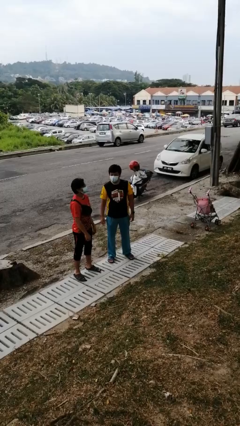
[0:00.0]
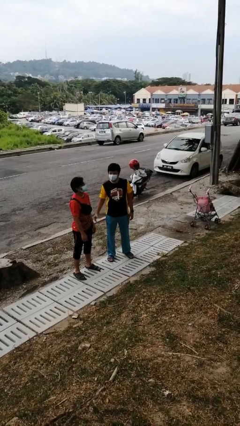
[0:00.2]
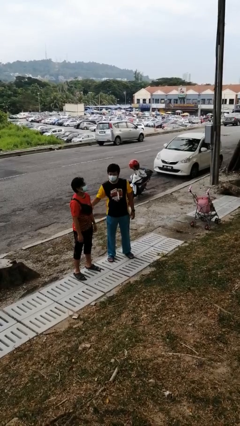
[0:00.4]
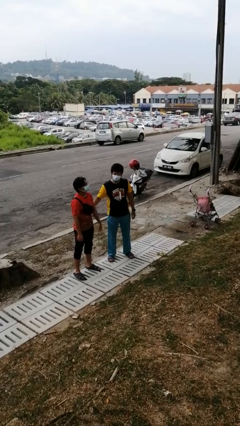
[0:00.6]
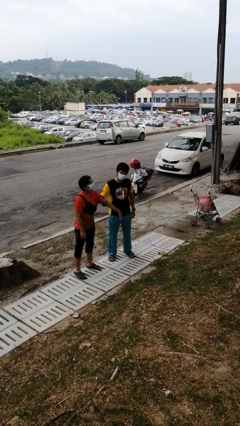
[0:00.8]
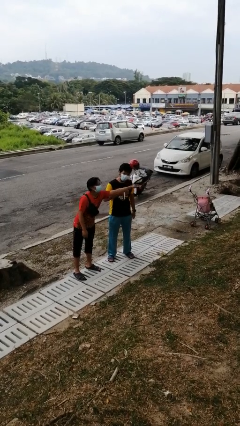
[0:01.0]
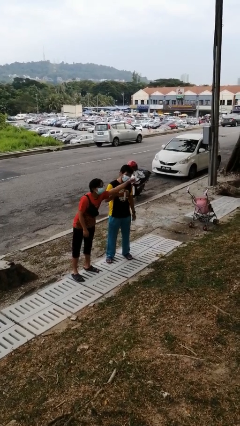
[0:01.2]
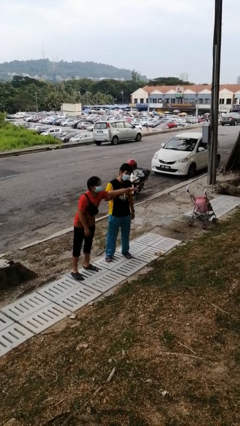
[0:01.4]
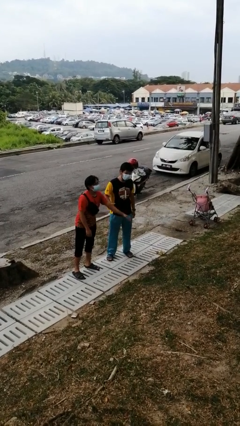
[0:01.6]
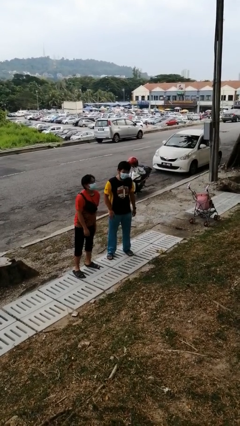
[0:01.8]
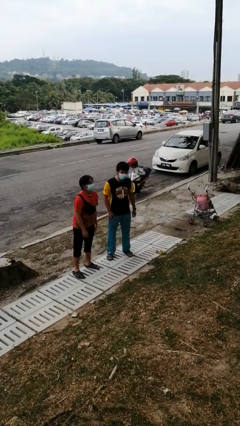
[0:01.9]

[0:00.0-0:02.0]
person grabs person by bicep

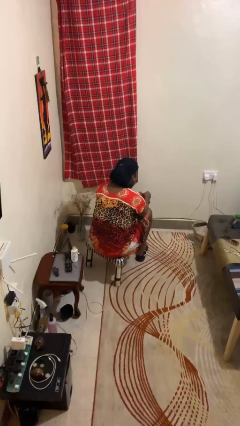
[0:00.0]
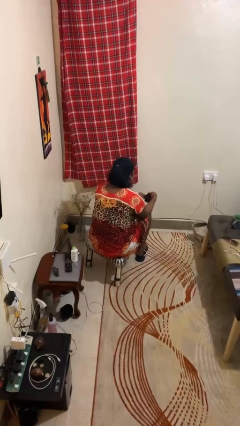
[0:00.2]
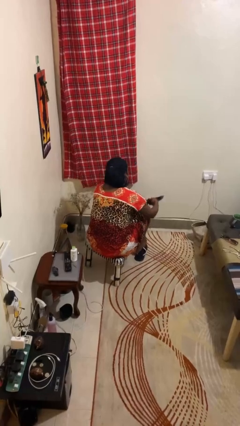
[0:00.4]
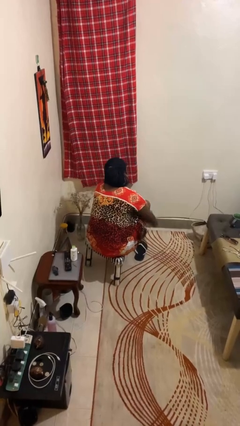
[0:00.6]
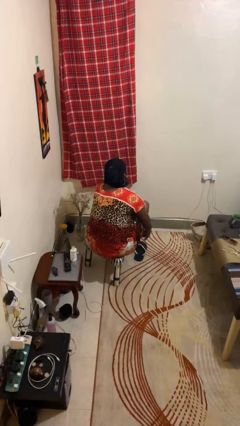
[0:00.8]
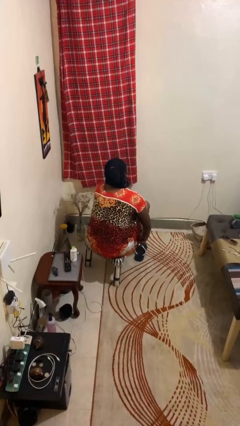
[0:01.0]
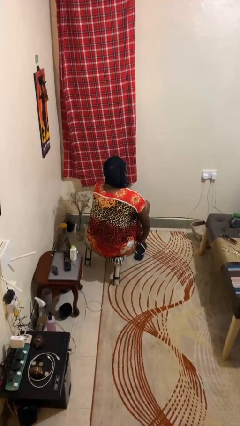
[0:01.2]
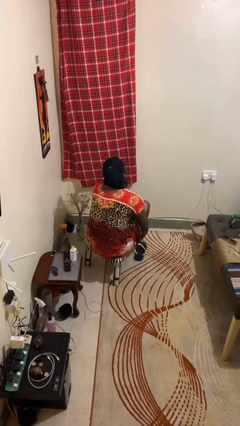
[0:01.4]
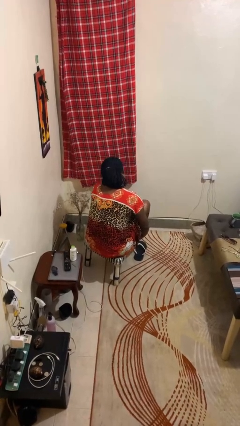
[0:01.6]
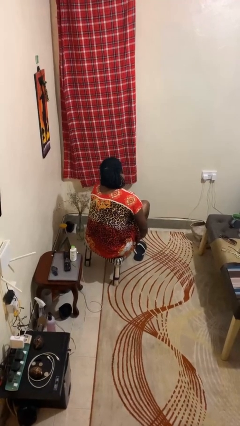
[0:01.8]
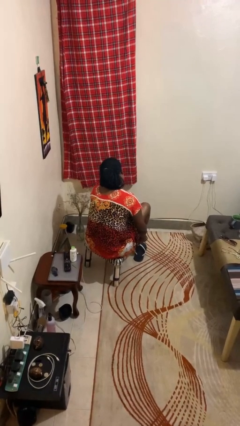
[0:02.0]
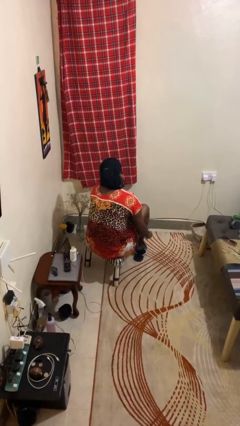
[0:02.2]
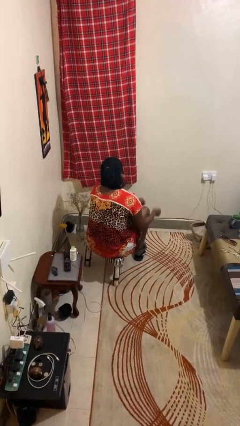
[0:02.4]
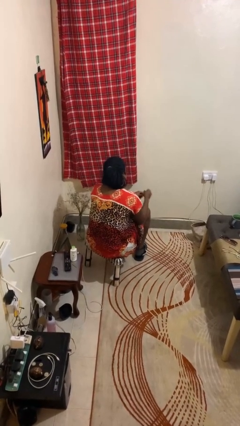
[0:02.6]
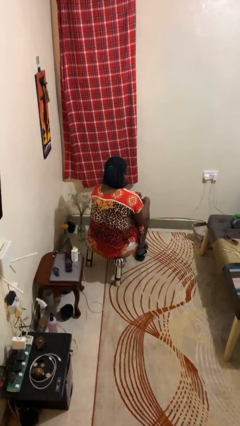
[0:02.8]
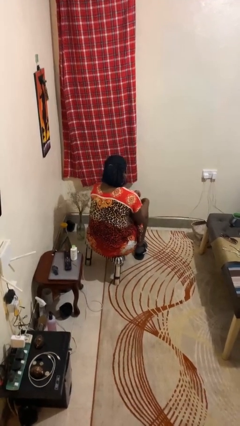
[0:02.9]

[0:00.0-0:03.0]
person puts on socks

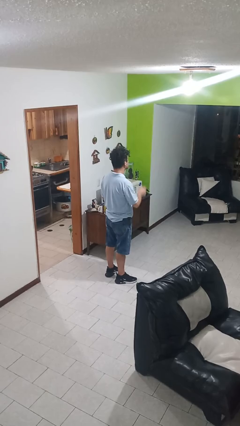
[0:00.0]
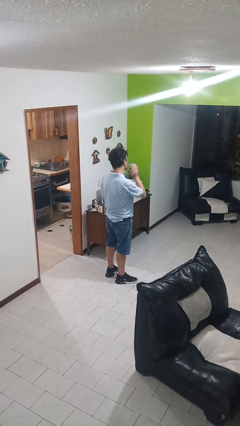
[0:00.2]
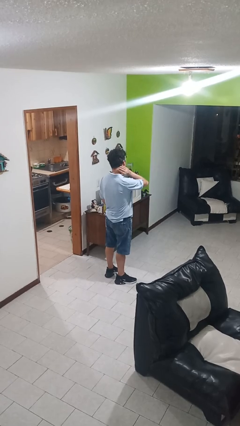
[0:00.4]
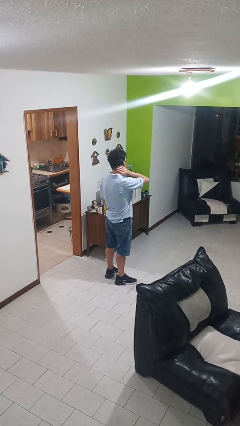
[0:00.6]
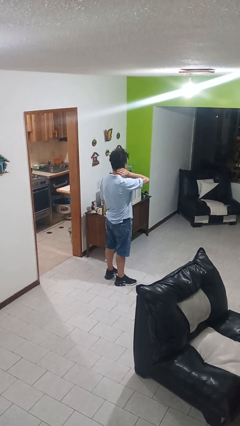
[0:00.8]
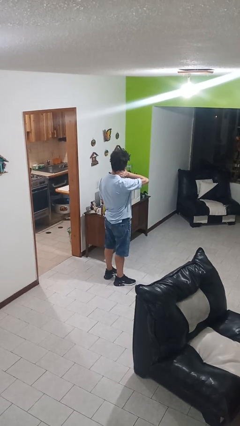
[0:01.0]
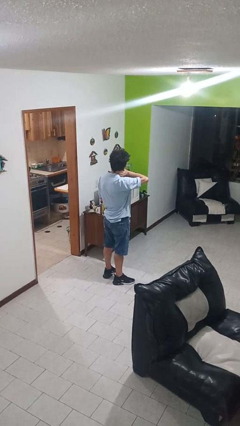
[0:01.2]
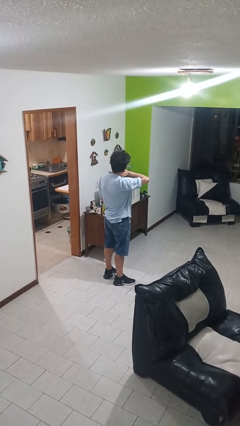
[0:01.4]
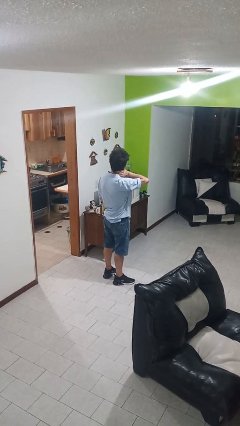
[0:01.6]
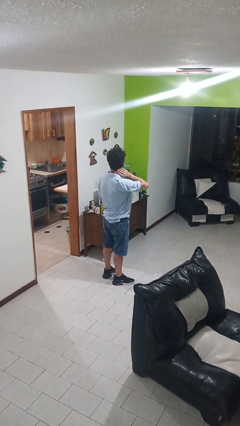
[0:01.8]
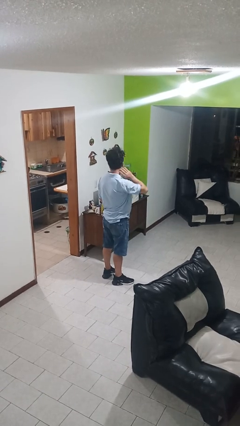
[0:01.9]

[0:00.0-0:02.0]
person rubs neck

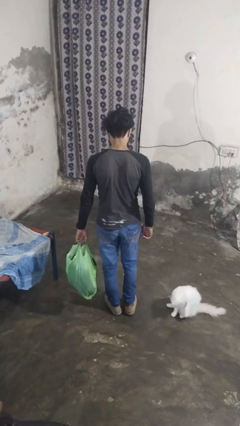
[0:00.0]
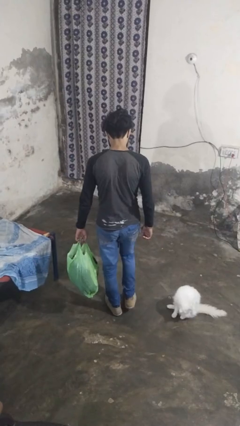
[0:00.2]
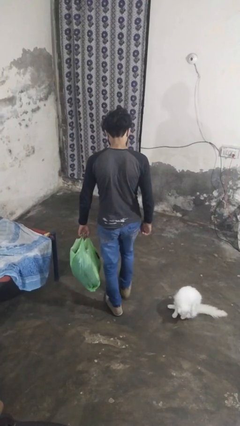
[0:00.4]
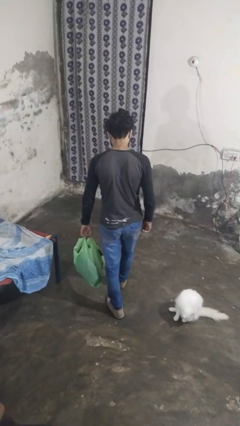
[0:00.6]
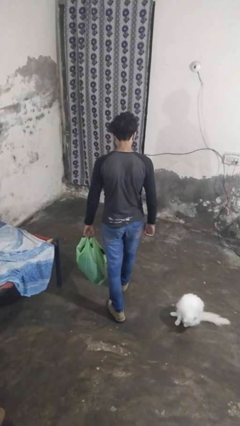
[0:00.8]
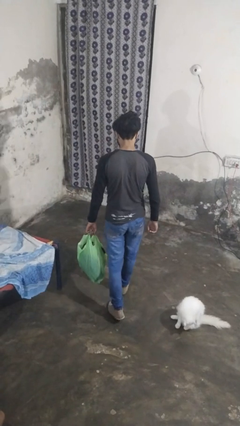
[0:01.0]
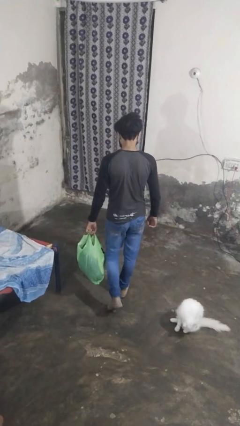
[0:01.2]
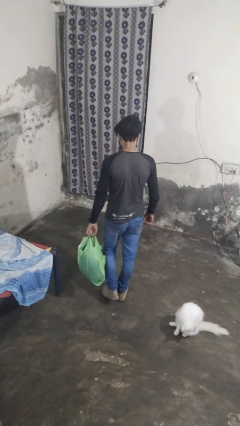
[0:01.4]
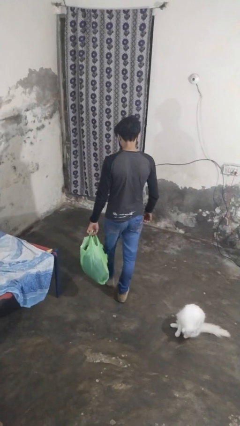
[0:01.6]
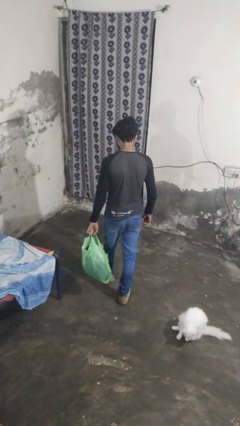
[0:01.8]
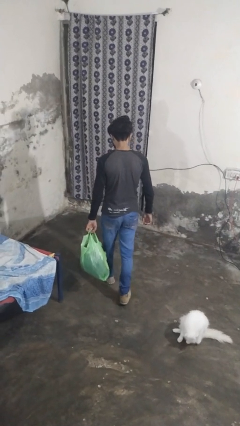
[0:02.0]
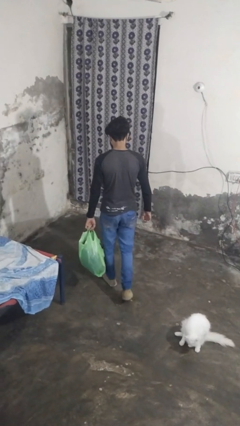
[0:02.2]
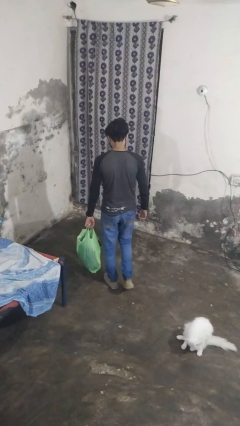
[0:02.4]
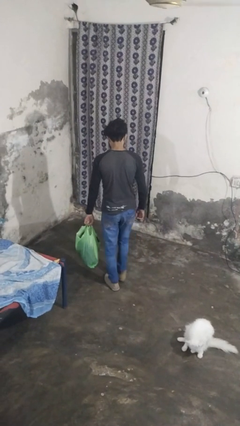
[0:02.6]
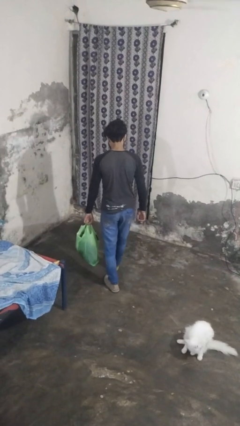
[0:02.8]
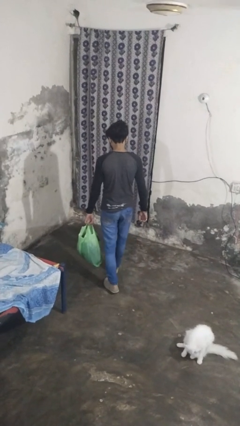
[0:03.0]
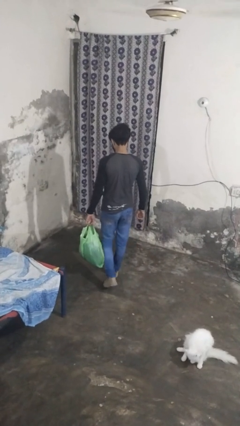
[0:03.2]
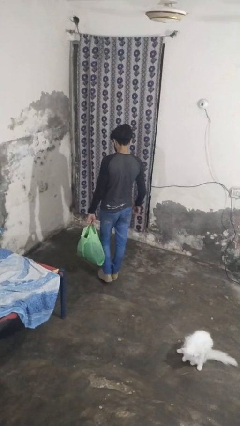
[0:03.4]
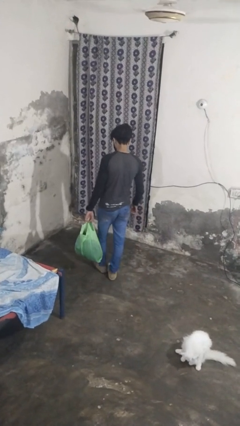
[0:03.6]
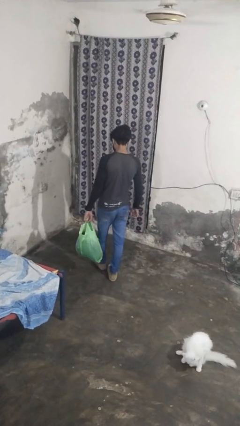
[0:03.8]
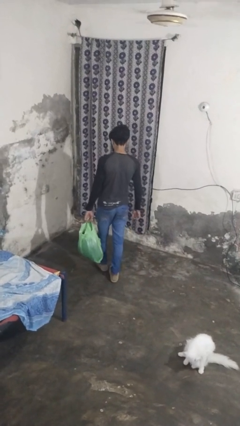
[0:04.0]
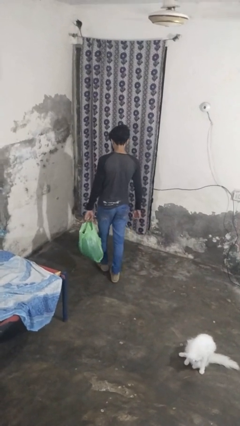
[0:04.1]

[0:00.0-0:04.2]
person carries groceries

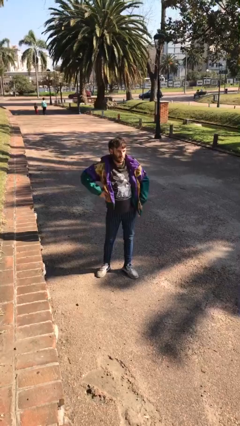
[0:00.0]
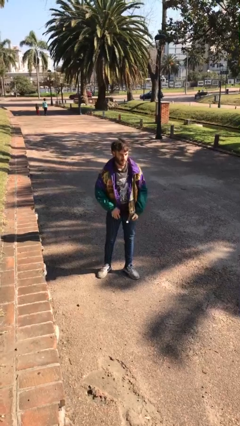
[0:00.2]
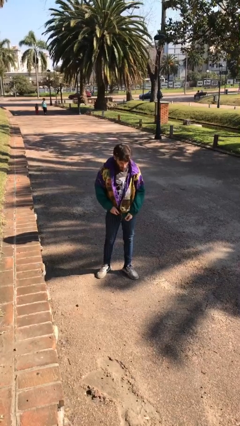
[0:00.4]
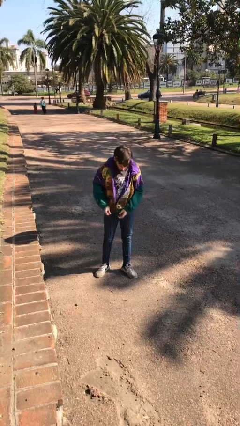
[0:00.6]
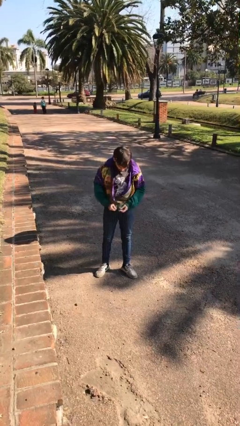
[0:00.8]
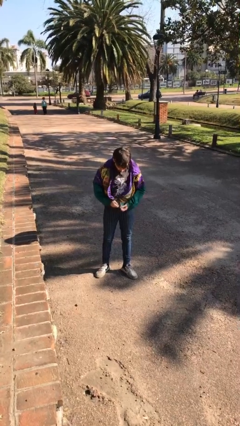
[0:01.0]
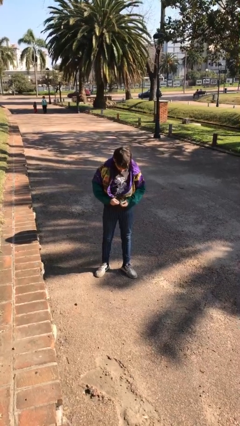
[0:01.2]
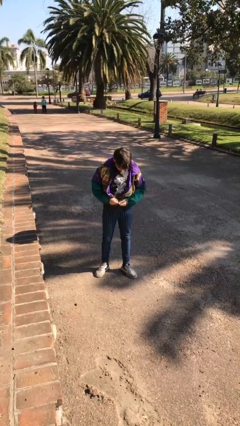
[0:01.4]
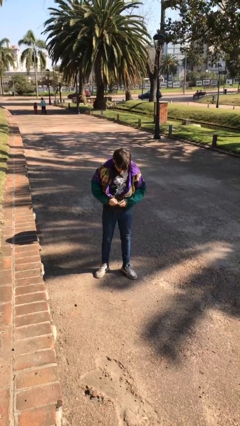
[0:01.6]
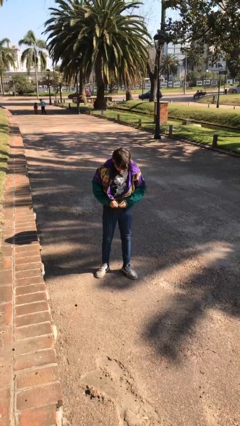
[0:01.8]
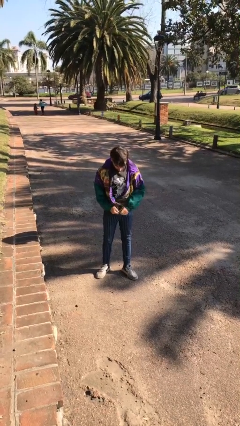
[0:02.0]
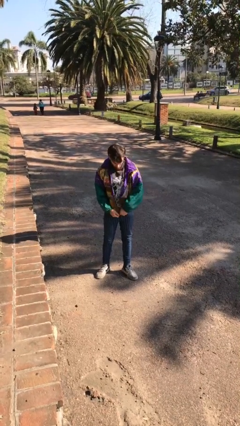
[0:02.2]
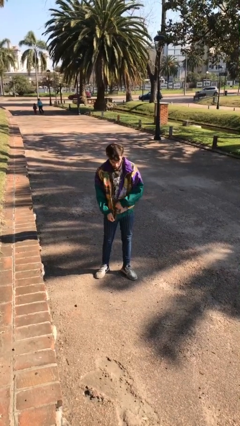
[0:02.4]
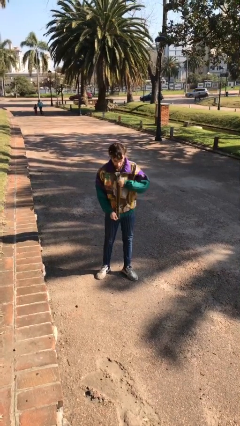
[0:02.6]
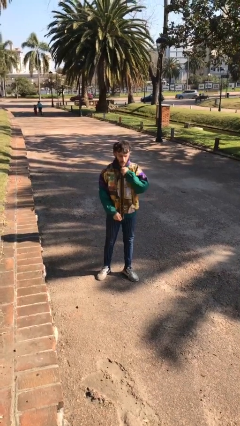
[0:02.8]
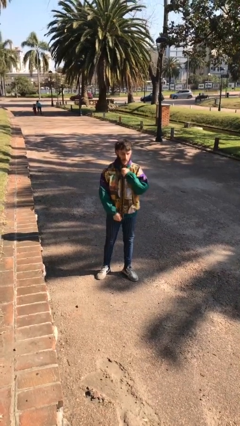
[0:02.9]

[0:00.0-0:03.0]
person zips up jacket

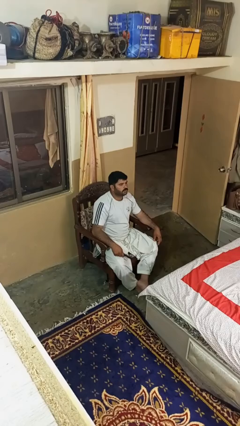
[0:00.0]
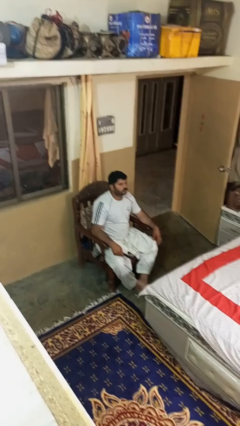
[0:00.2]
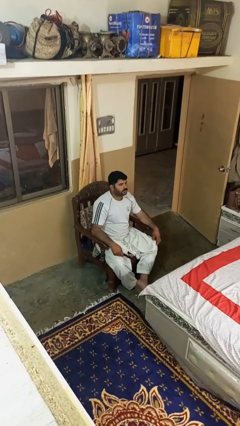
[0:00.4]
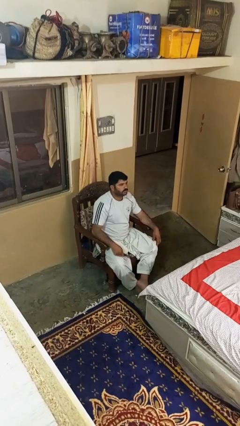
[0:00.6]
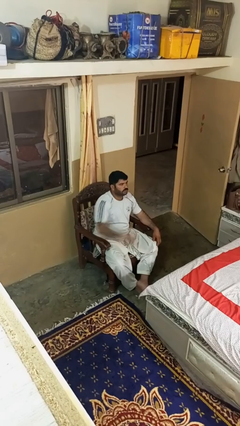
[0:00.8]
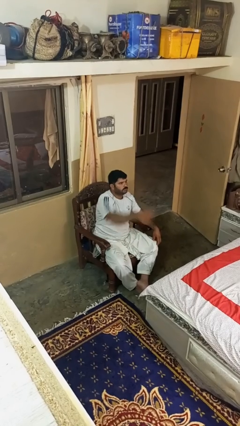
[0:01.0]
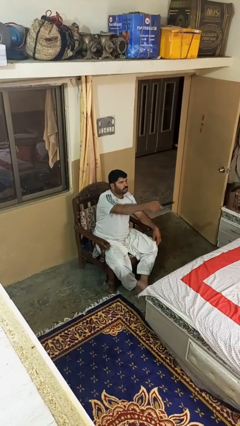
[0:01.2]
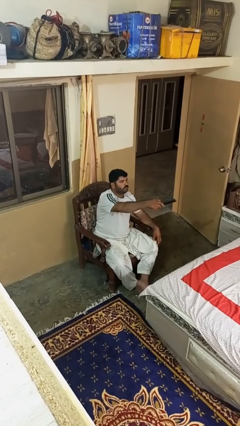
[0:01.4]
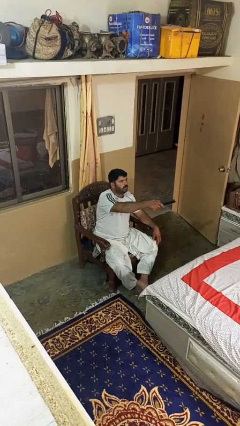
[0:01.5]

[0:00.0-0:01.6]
person uses television remote

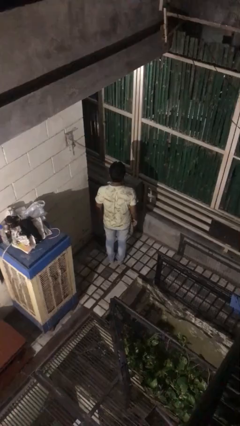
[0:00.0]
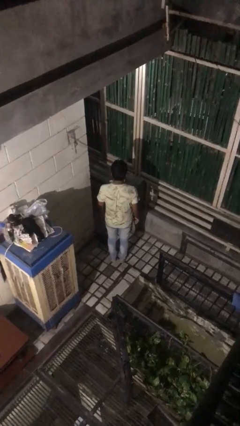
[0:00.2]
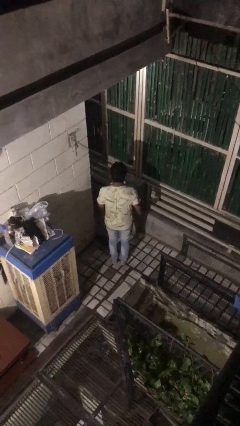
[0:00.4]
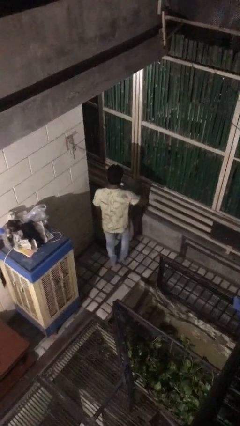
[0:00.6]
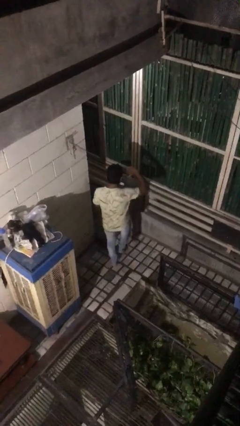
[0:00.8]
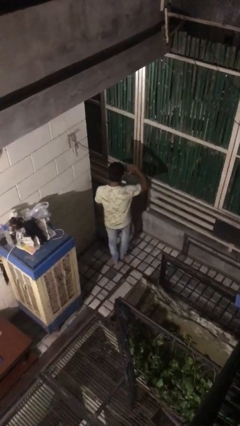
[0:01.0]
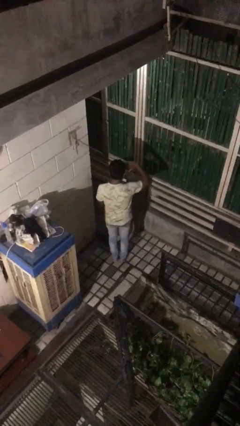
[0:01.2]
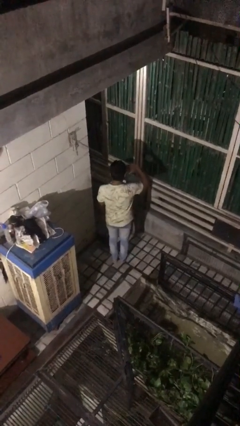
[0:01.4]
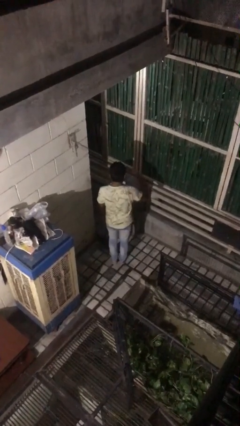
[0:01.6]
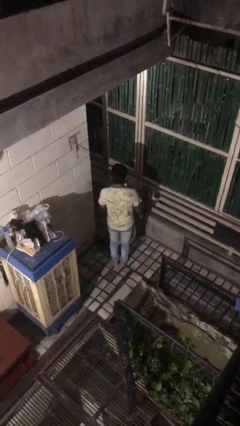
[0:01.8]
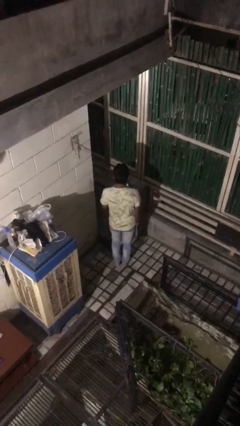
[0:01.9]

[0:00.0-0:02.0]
person salutes
